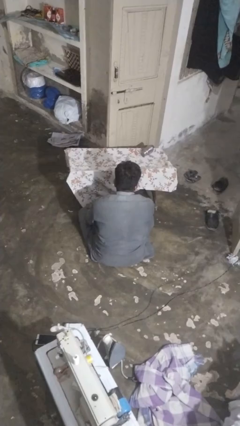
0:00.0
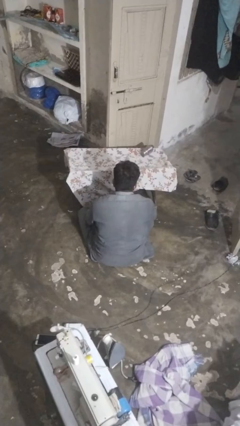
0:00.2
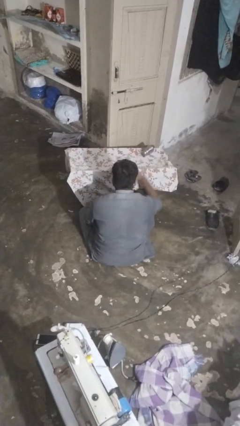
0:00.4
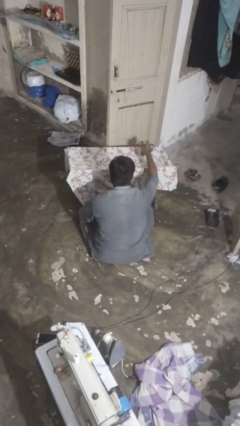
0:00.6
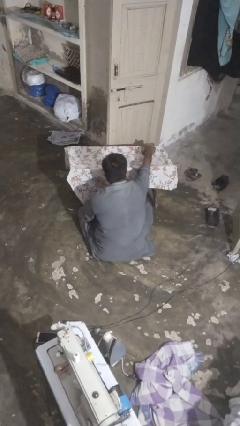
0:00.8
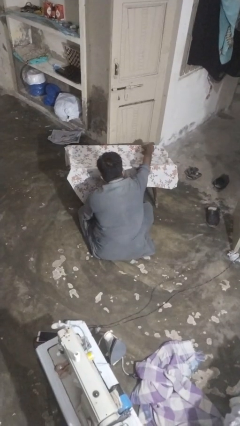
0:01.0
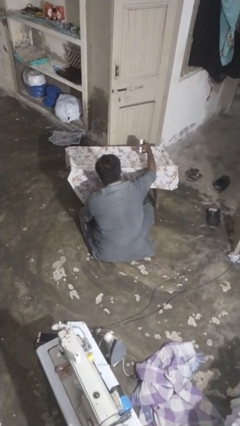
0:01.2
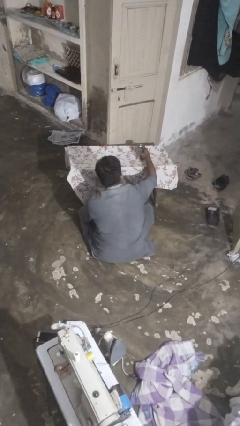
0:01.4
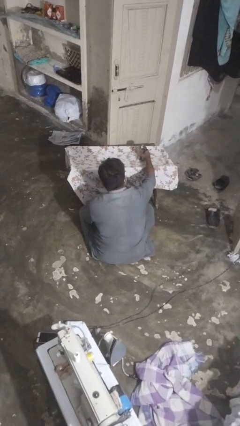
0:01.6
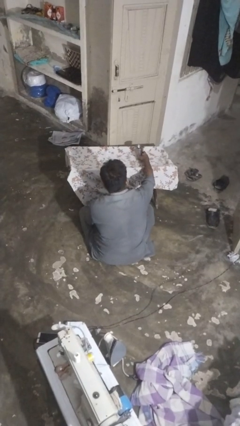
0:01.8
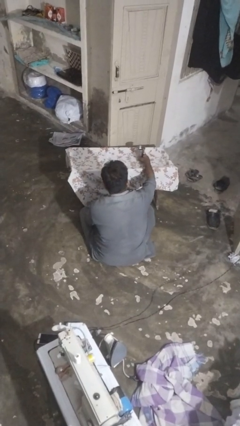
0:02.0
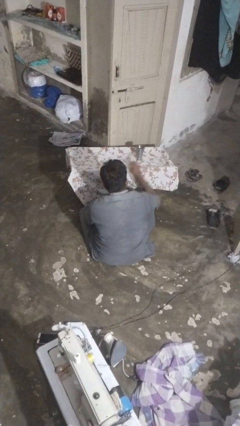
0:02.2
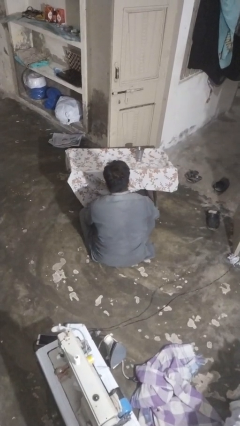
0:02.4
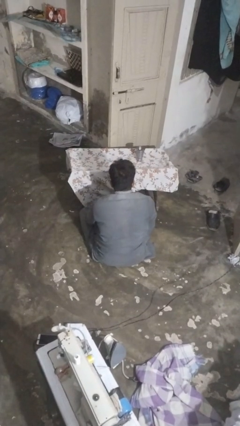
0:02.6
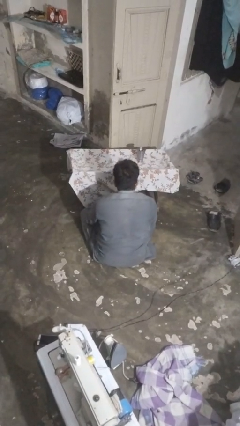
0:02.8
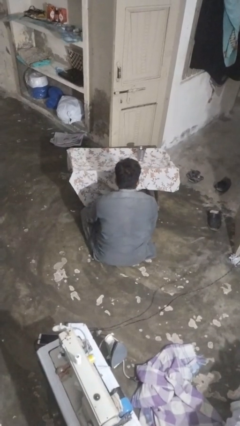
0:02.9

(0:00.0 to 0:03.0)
person sets upright glass

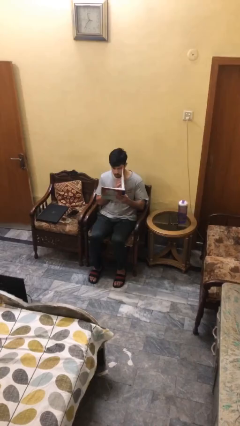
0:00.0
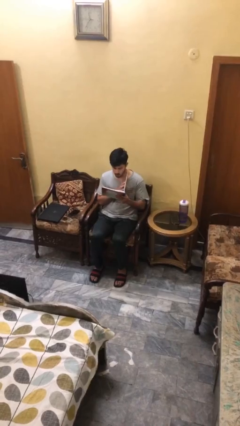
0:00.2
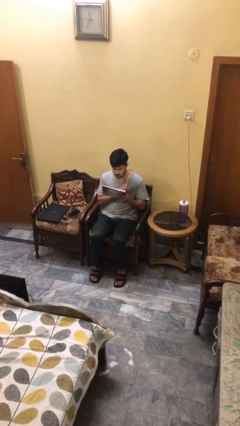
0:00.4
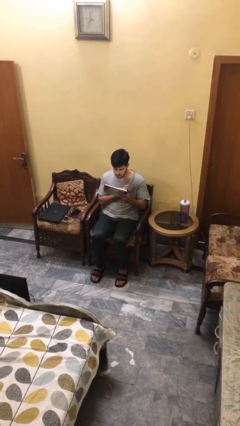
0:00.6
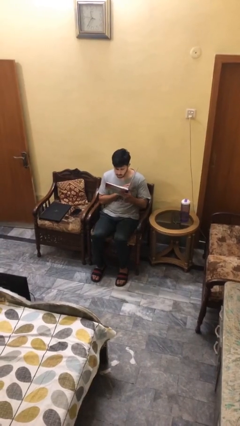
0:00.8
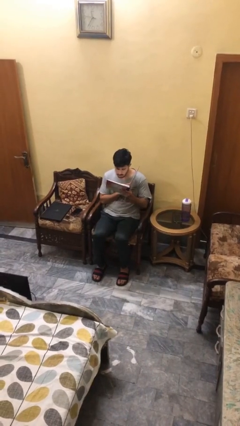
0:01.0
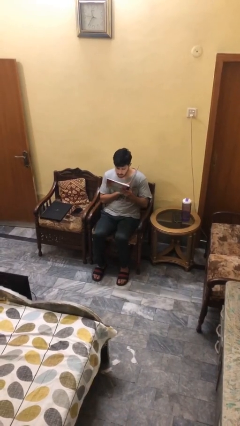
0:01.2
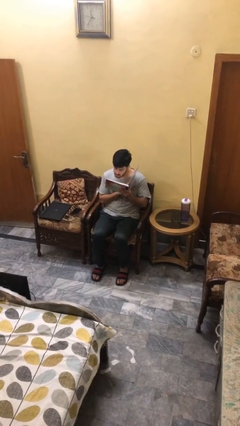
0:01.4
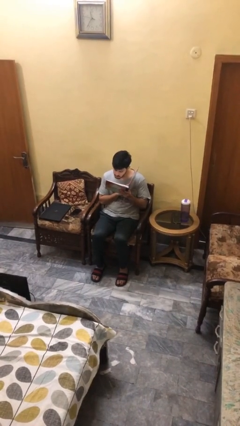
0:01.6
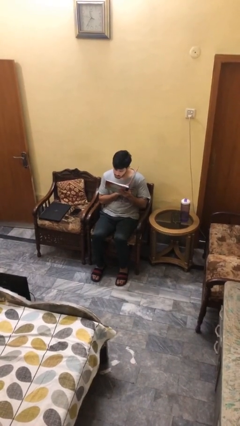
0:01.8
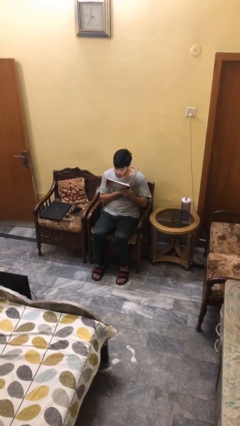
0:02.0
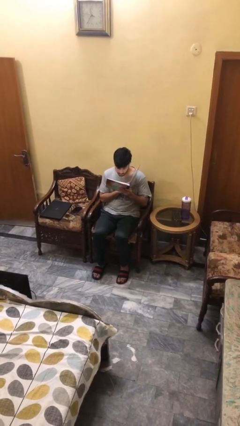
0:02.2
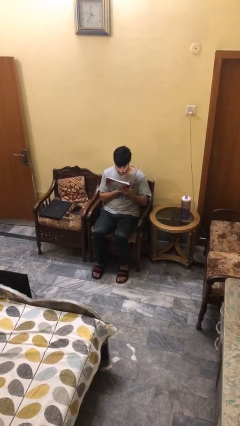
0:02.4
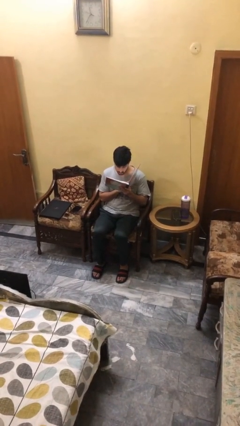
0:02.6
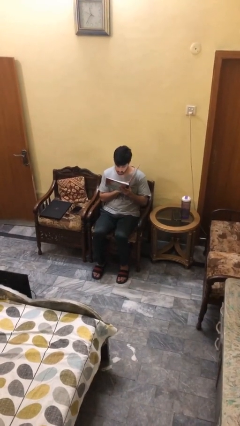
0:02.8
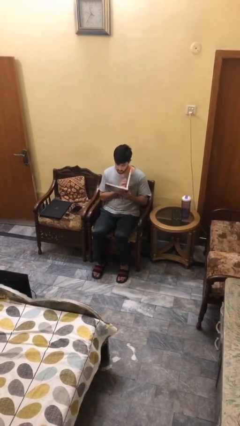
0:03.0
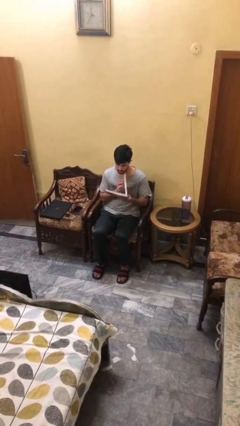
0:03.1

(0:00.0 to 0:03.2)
person reads document

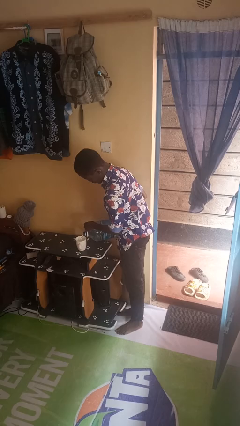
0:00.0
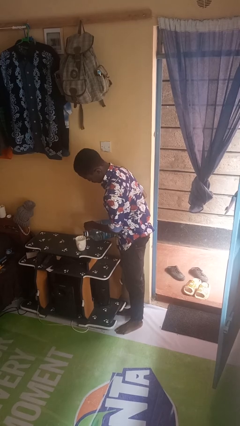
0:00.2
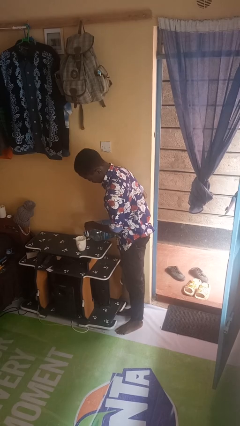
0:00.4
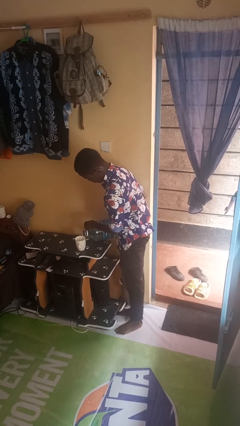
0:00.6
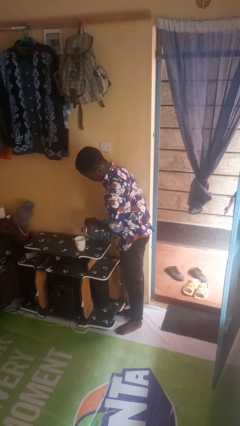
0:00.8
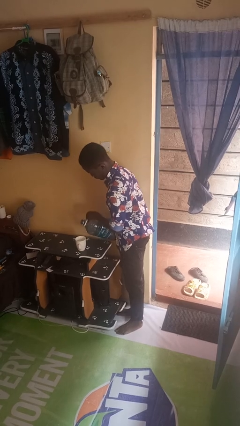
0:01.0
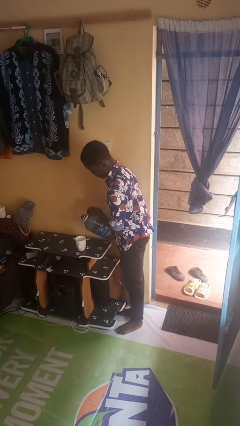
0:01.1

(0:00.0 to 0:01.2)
person pours liquid into cup

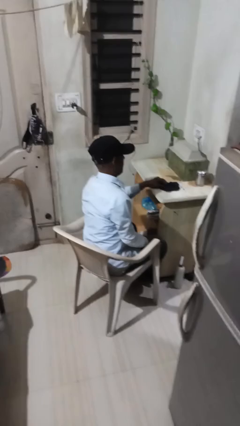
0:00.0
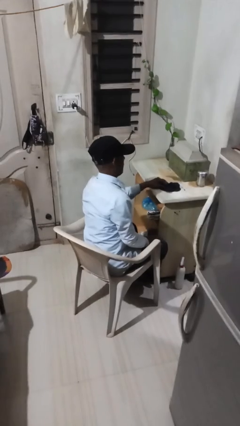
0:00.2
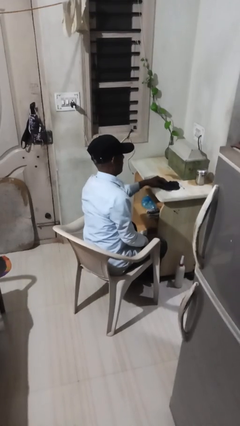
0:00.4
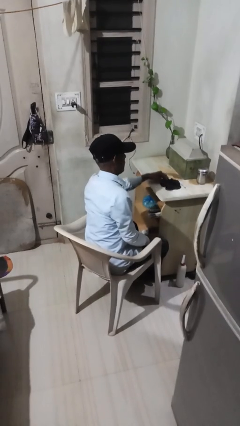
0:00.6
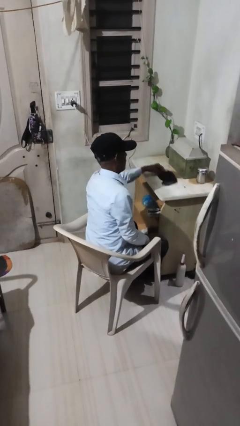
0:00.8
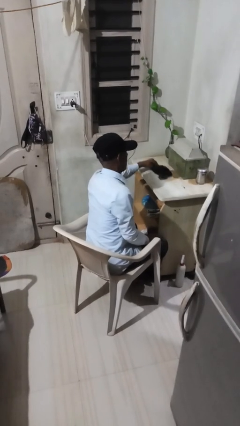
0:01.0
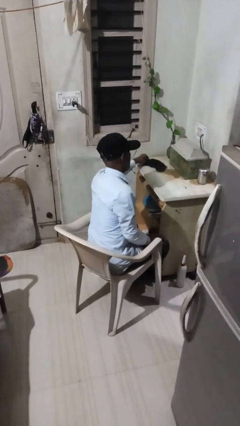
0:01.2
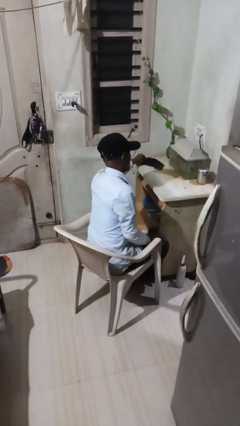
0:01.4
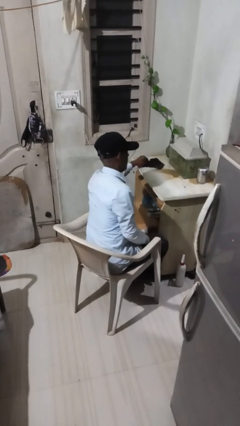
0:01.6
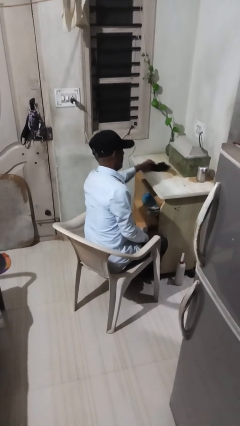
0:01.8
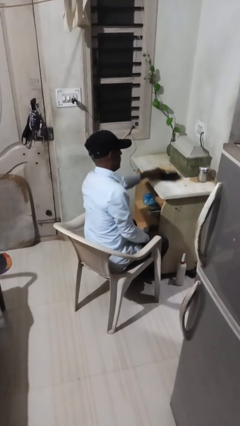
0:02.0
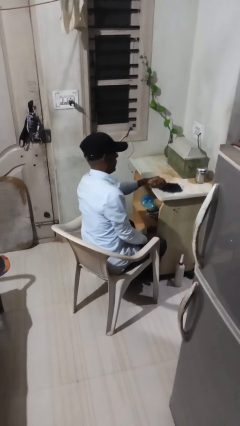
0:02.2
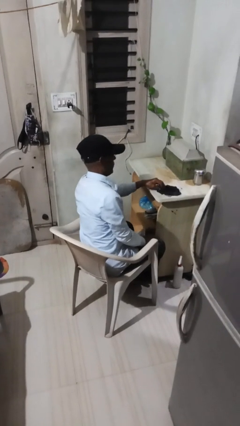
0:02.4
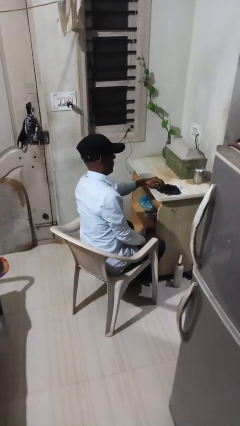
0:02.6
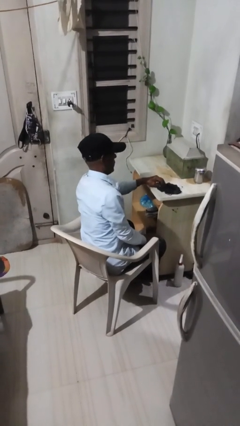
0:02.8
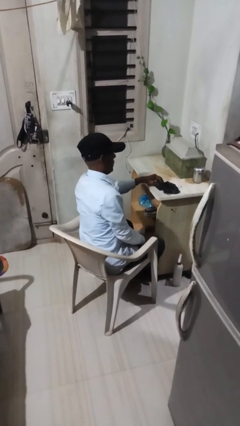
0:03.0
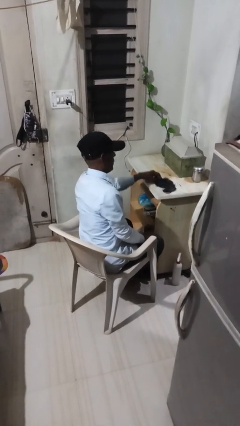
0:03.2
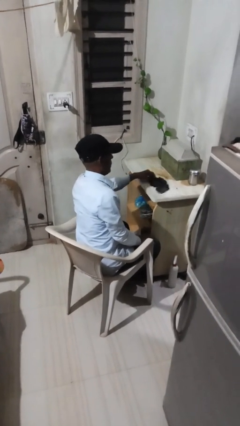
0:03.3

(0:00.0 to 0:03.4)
person cleans table with rag

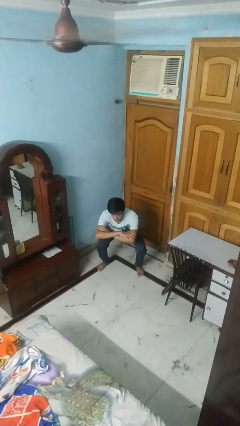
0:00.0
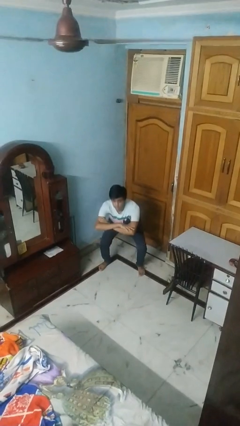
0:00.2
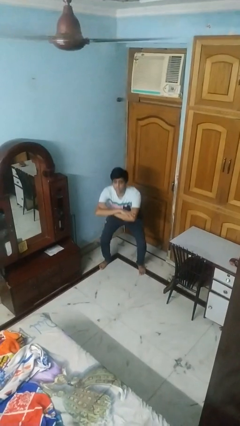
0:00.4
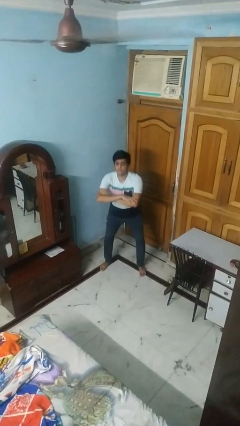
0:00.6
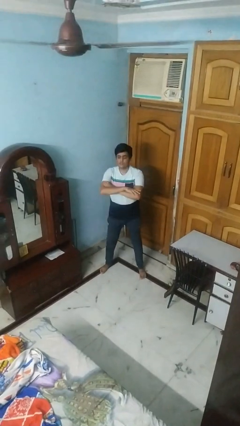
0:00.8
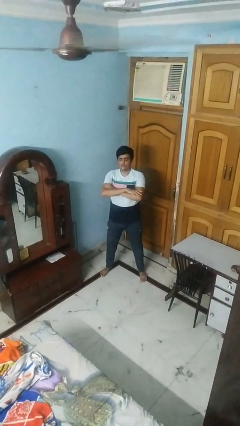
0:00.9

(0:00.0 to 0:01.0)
person stands up

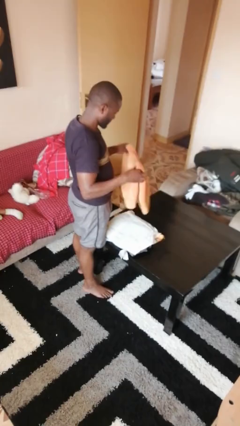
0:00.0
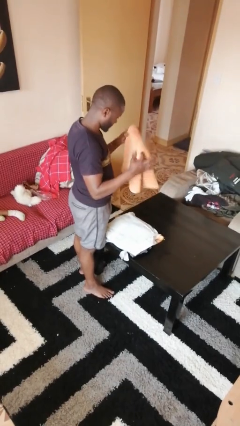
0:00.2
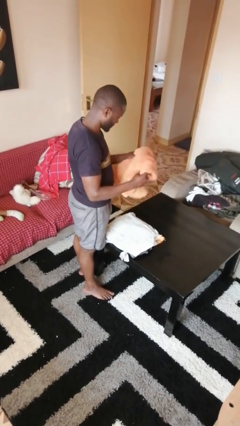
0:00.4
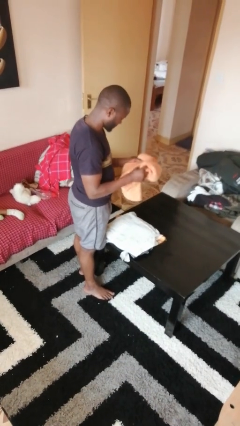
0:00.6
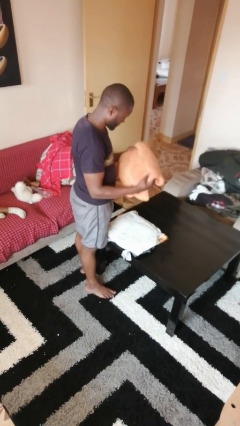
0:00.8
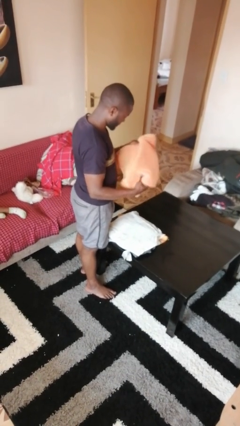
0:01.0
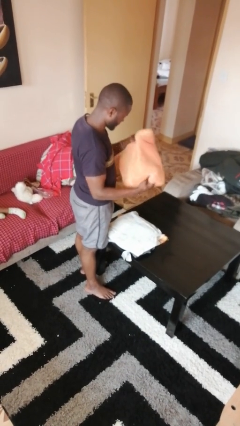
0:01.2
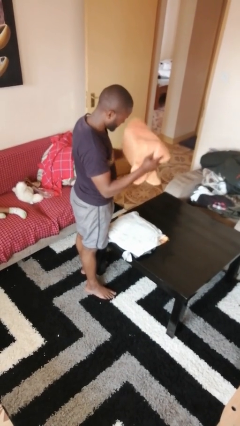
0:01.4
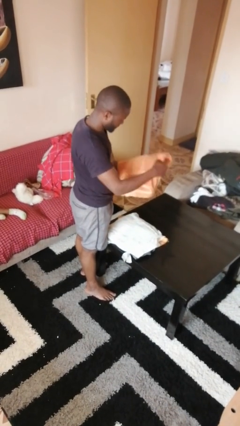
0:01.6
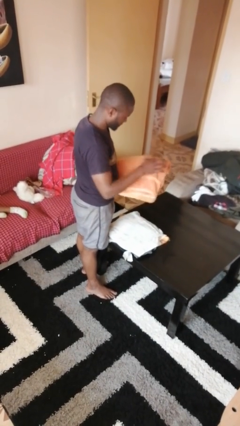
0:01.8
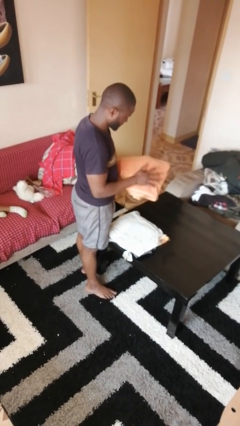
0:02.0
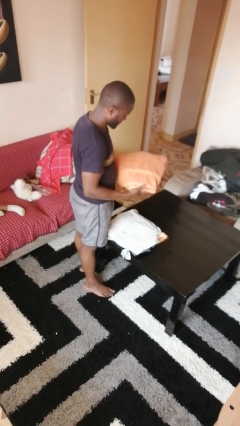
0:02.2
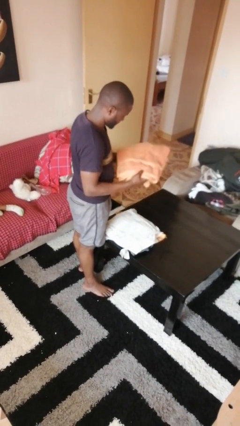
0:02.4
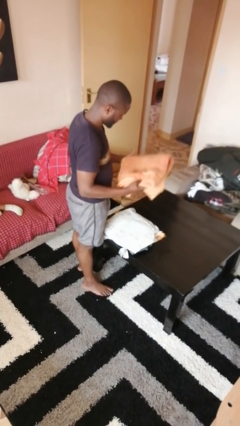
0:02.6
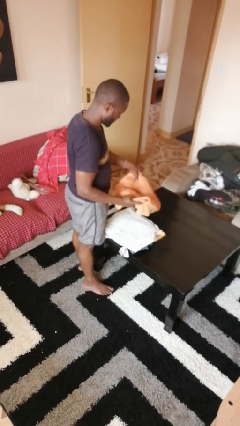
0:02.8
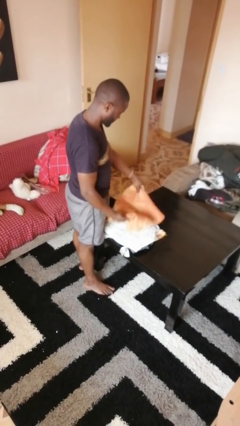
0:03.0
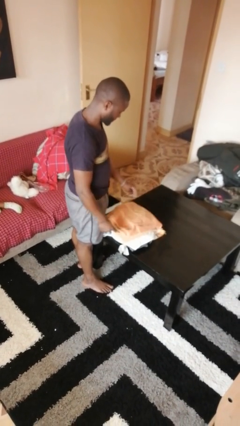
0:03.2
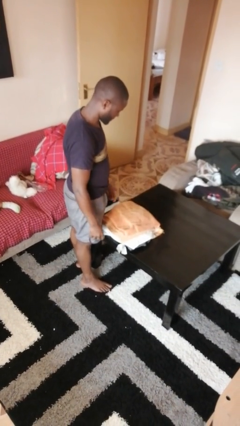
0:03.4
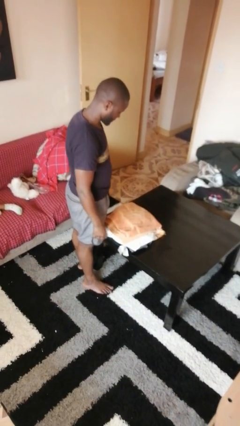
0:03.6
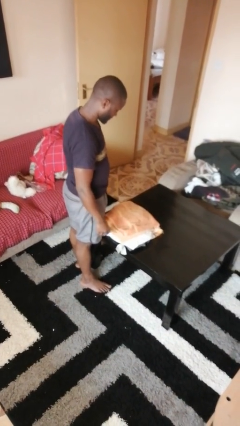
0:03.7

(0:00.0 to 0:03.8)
person folds towel

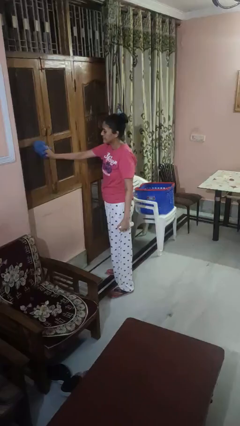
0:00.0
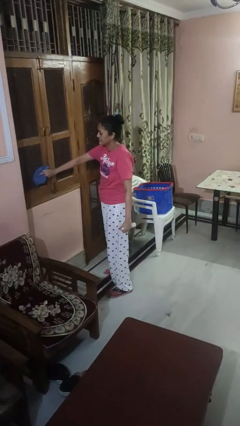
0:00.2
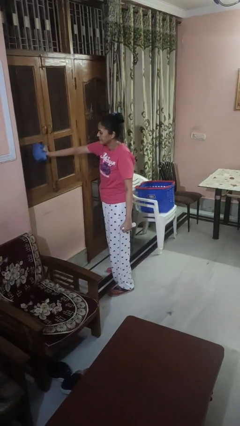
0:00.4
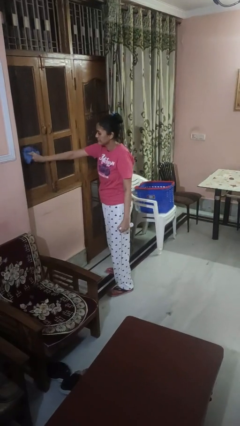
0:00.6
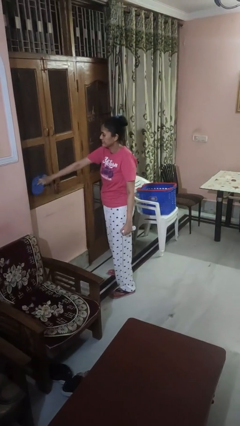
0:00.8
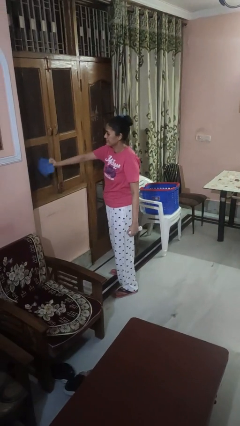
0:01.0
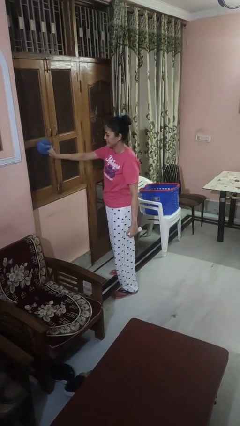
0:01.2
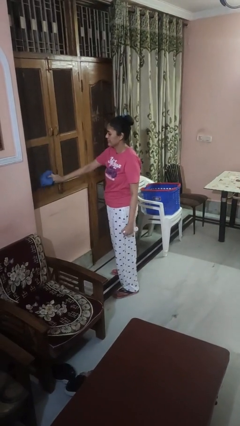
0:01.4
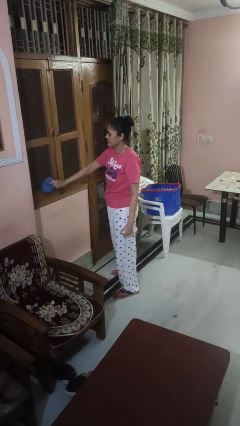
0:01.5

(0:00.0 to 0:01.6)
person washes window

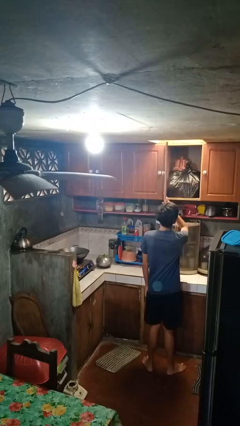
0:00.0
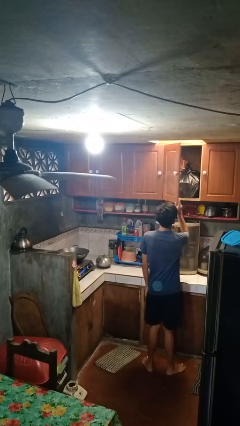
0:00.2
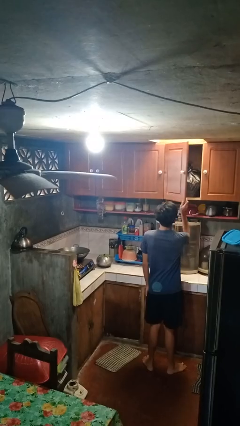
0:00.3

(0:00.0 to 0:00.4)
person closes cabinet
